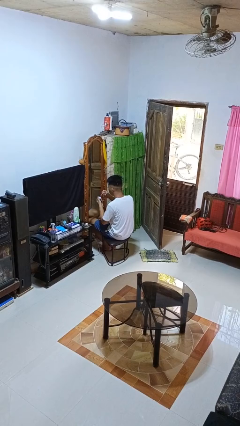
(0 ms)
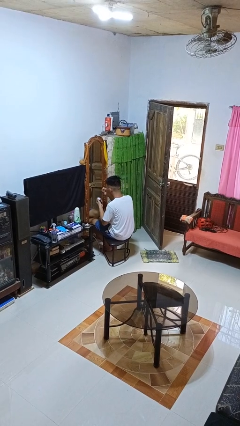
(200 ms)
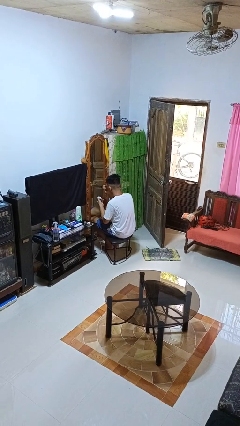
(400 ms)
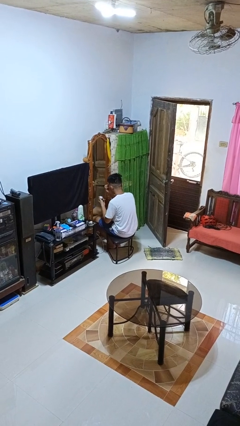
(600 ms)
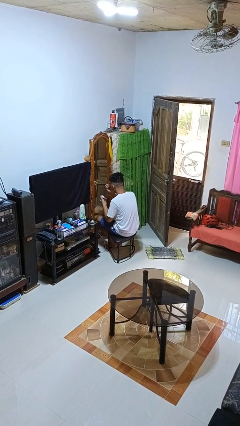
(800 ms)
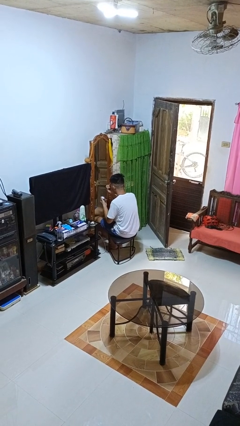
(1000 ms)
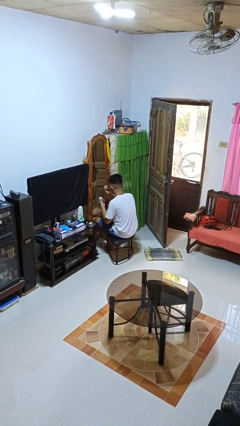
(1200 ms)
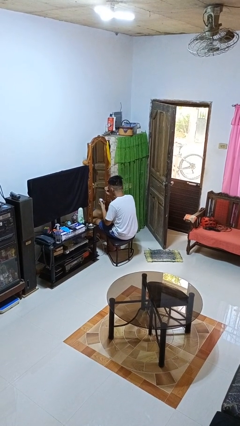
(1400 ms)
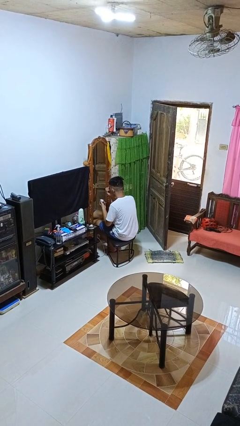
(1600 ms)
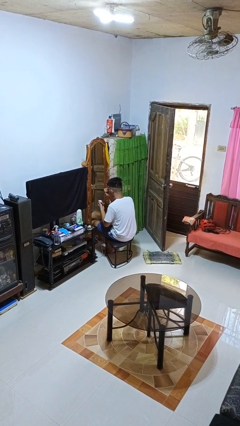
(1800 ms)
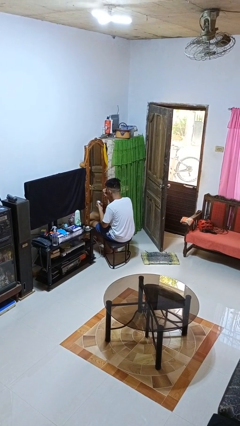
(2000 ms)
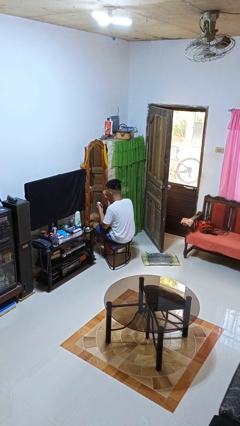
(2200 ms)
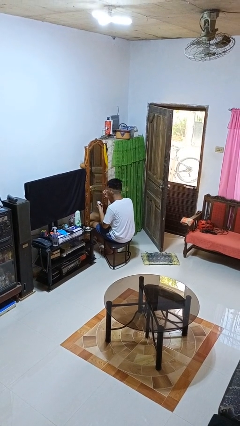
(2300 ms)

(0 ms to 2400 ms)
person applies eye makeup

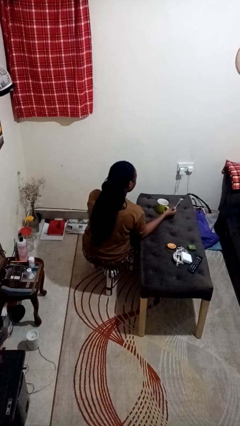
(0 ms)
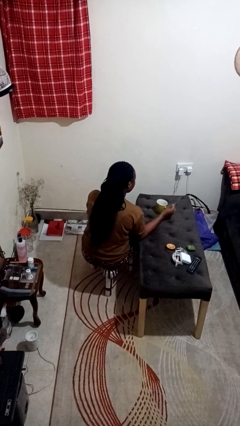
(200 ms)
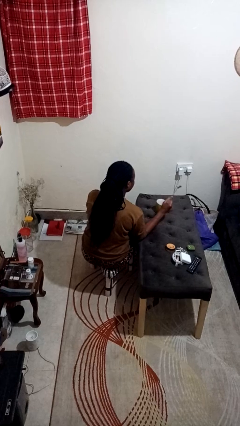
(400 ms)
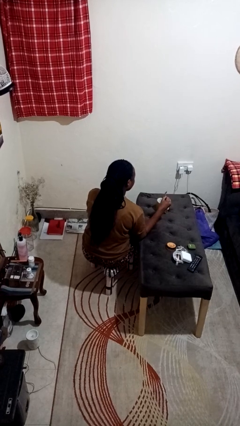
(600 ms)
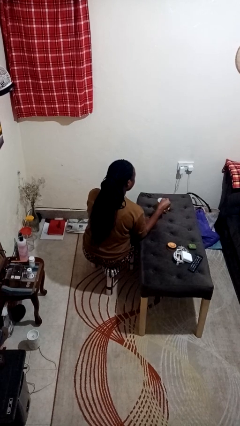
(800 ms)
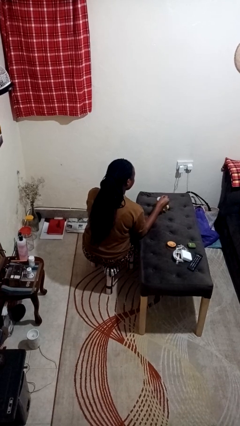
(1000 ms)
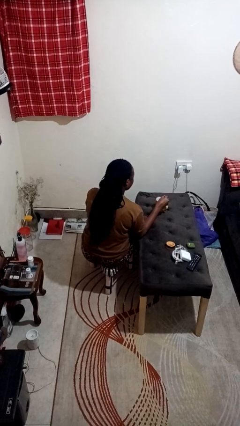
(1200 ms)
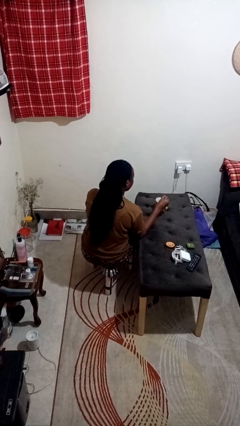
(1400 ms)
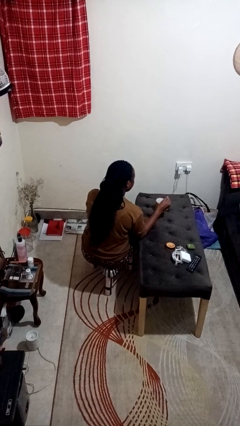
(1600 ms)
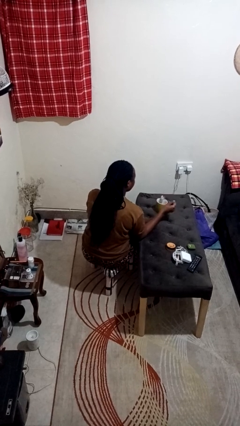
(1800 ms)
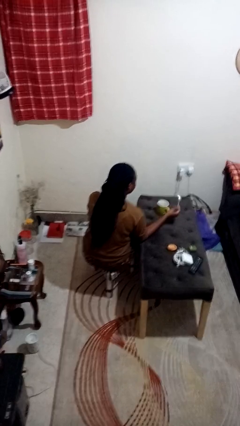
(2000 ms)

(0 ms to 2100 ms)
person stirs mug

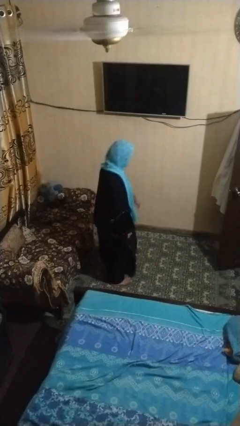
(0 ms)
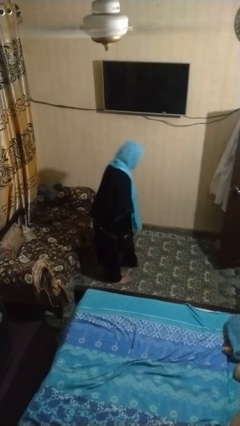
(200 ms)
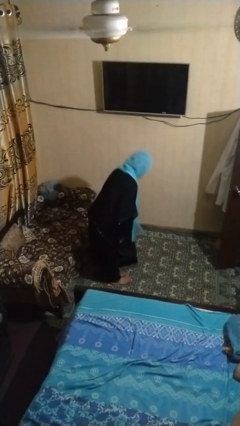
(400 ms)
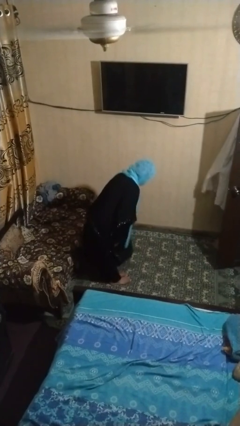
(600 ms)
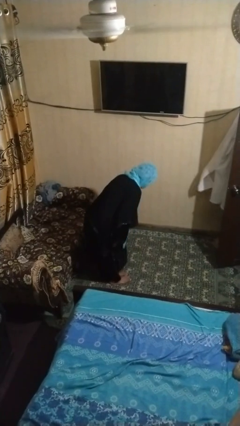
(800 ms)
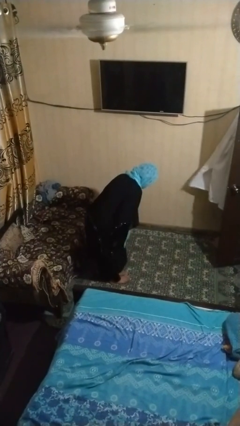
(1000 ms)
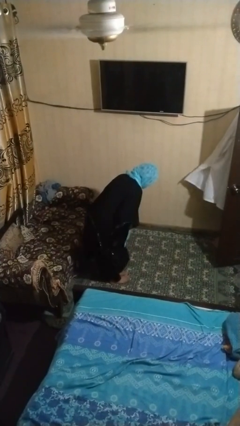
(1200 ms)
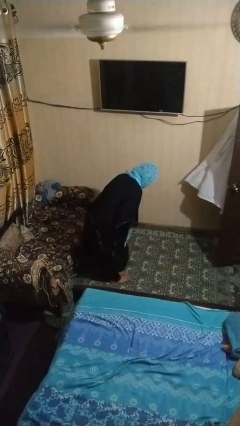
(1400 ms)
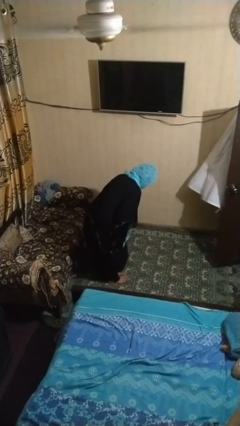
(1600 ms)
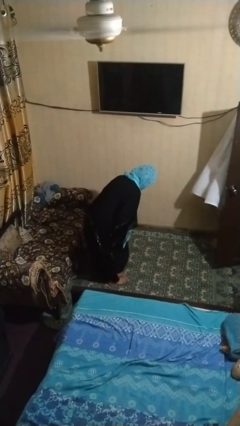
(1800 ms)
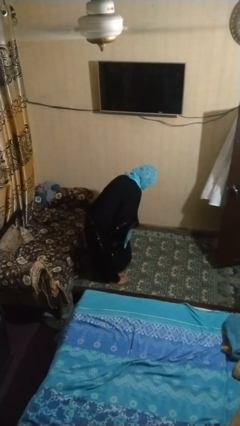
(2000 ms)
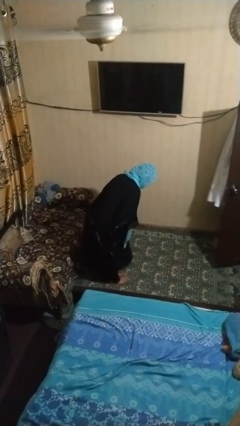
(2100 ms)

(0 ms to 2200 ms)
person bows

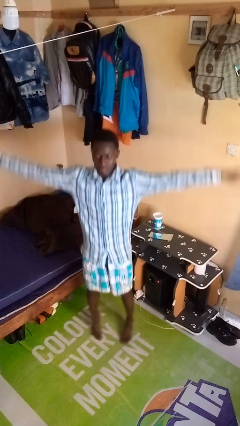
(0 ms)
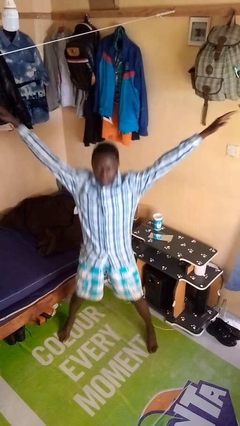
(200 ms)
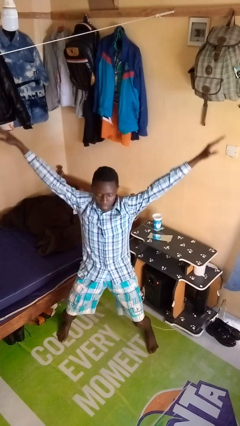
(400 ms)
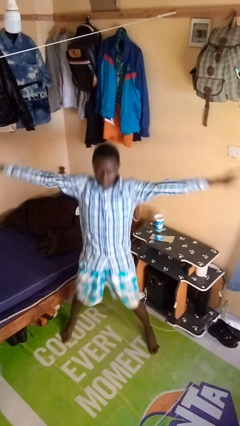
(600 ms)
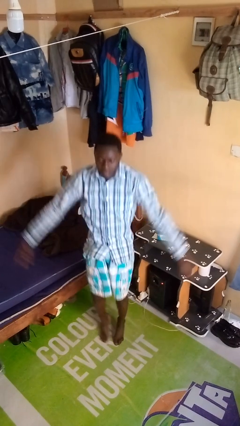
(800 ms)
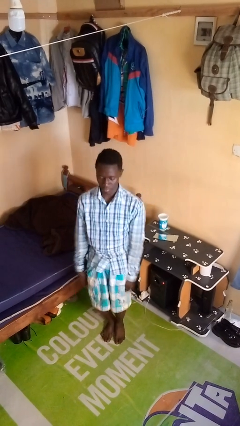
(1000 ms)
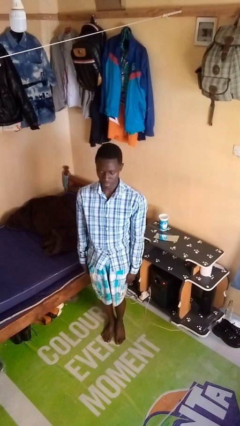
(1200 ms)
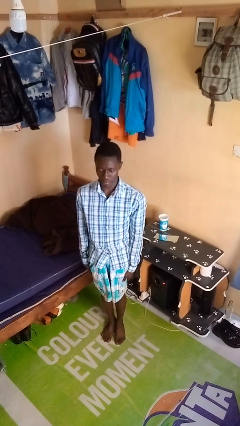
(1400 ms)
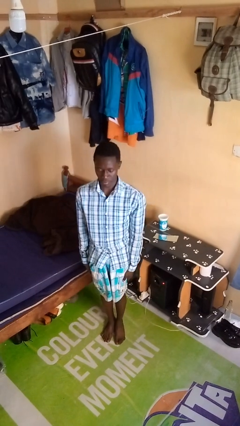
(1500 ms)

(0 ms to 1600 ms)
person exercises with jumping jacks

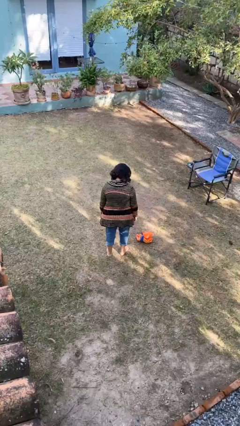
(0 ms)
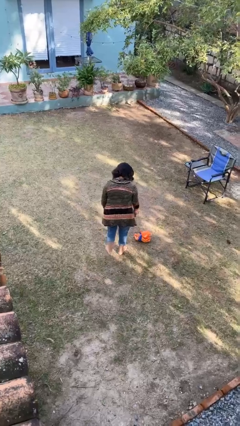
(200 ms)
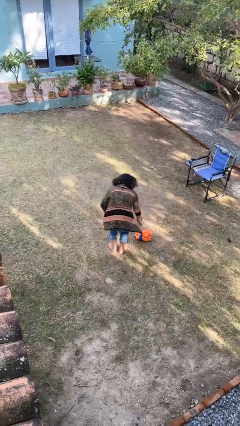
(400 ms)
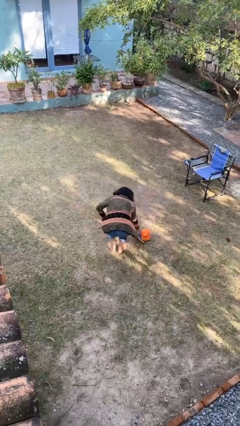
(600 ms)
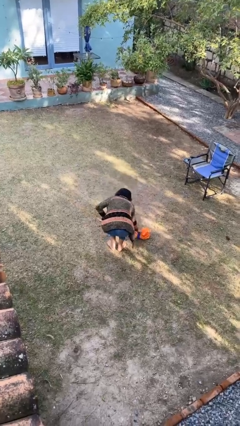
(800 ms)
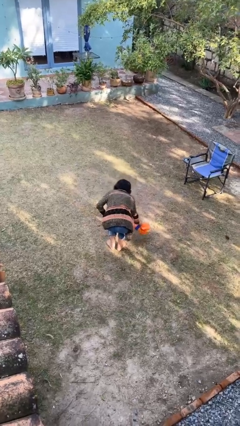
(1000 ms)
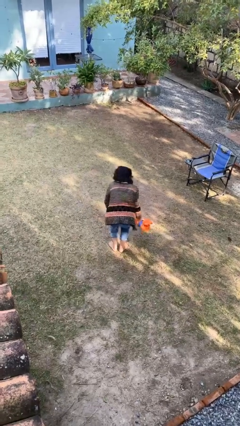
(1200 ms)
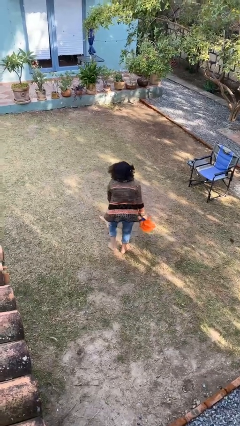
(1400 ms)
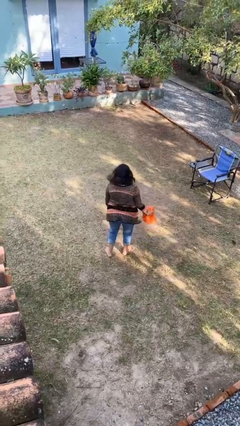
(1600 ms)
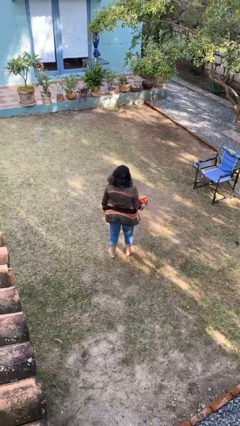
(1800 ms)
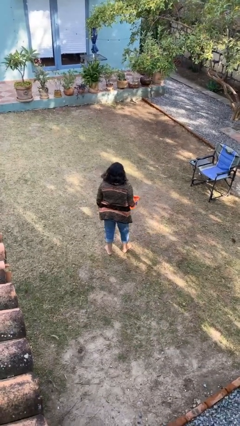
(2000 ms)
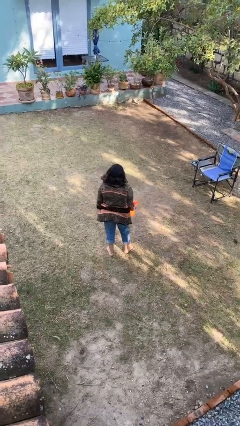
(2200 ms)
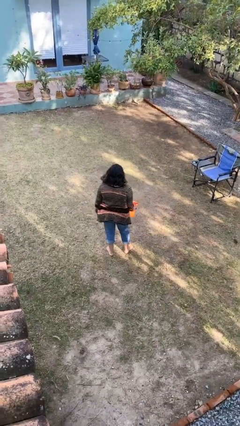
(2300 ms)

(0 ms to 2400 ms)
person picks up object from floor

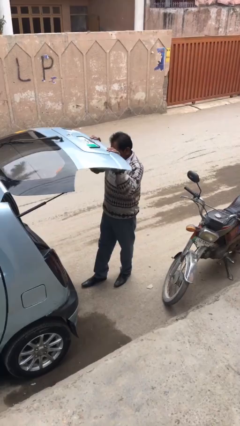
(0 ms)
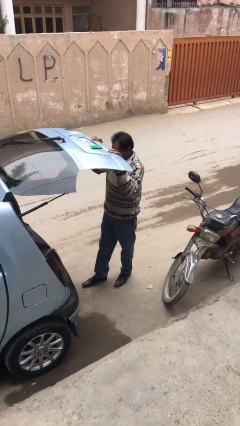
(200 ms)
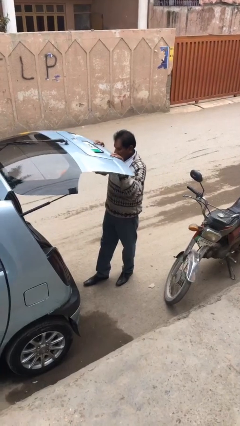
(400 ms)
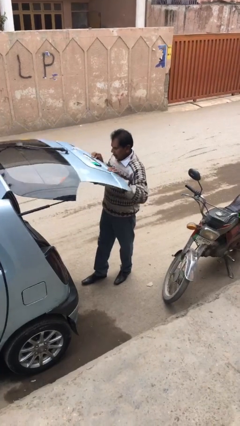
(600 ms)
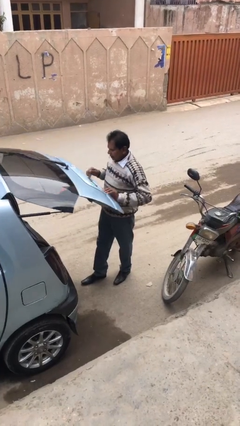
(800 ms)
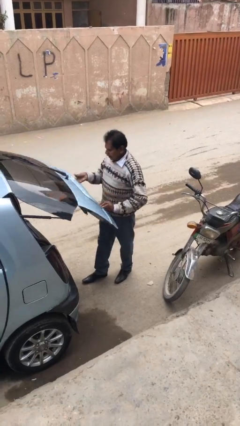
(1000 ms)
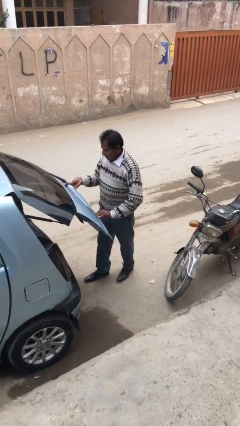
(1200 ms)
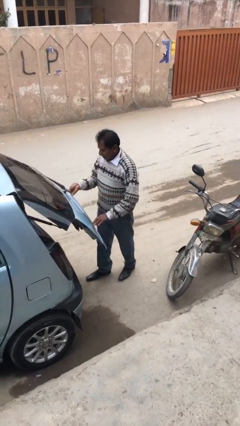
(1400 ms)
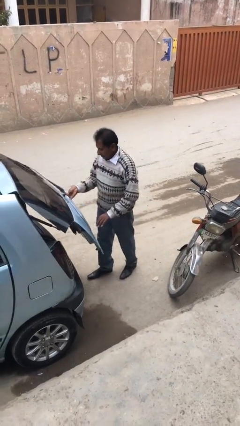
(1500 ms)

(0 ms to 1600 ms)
person closes car trunk

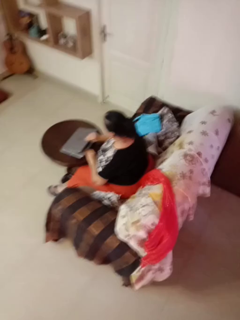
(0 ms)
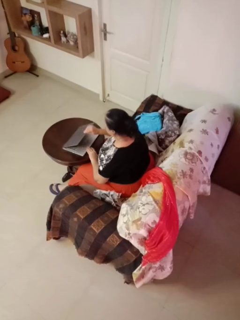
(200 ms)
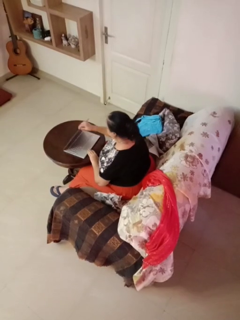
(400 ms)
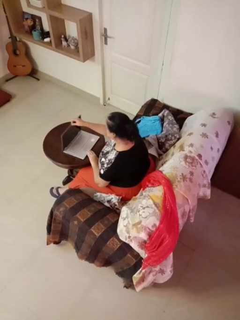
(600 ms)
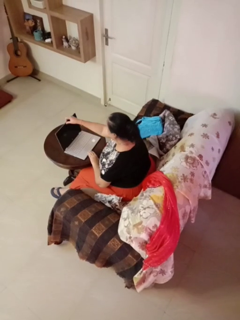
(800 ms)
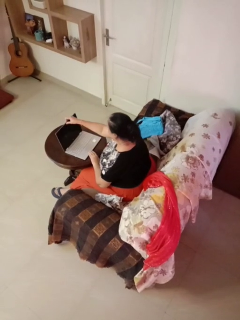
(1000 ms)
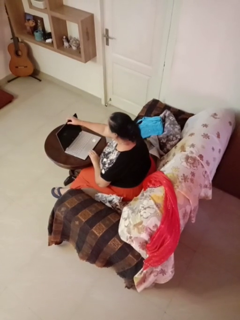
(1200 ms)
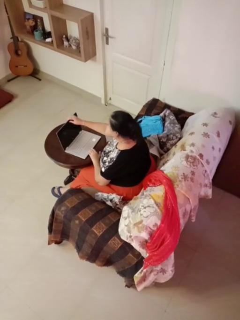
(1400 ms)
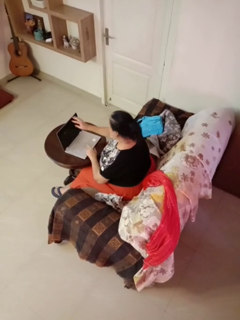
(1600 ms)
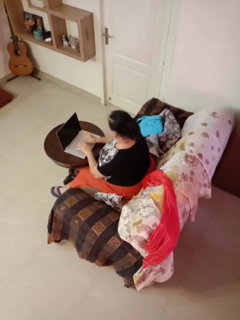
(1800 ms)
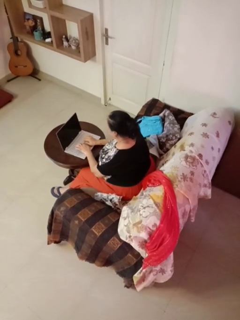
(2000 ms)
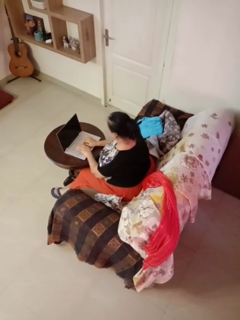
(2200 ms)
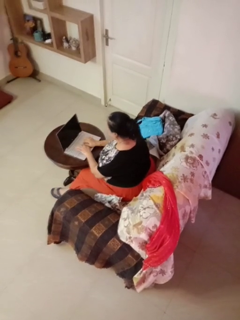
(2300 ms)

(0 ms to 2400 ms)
person opens laptop

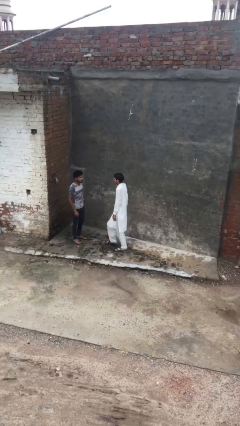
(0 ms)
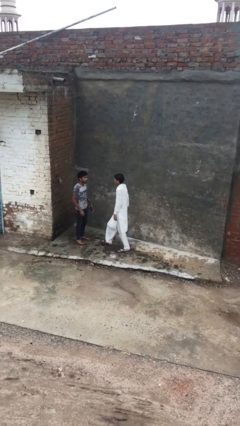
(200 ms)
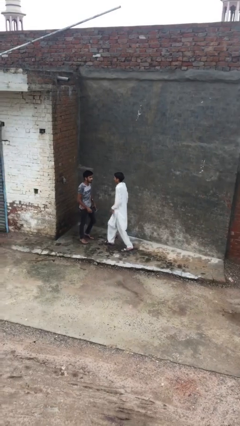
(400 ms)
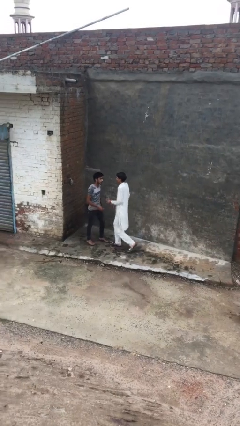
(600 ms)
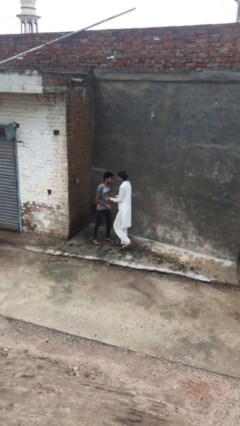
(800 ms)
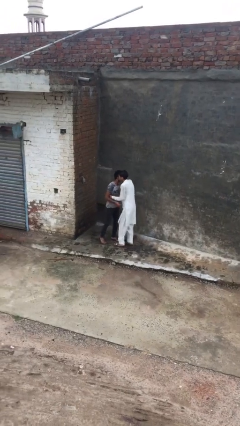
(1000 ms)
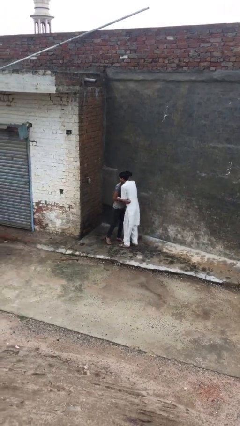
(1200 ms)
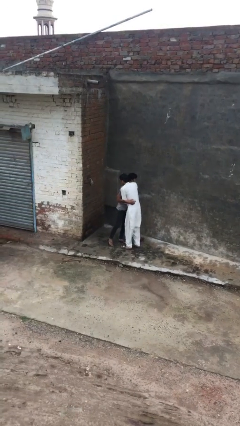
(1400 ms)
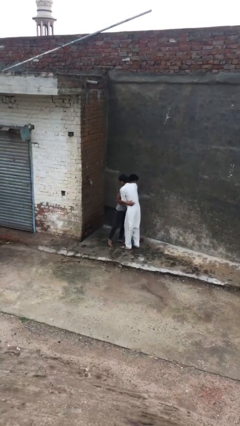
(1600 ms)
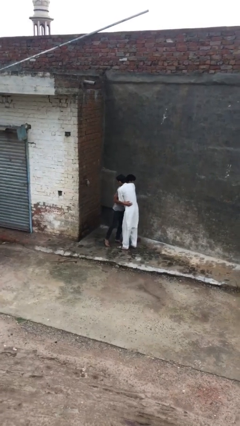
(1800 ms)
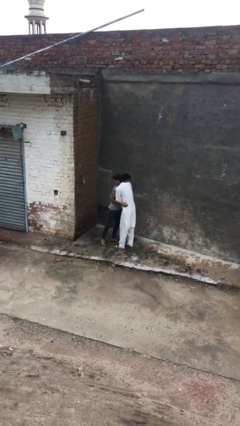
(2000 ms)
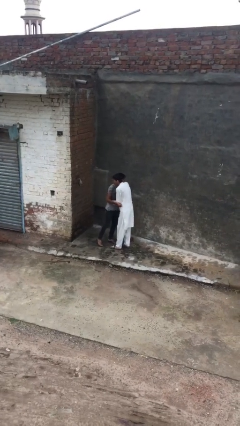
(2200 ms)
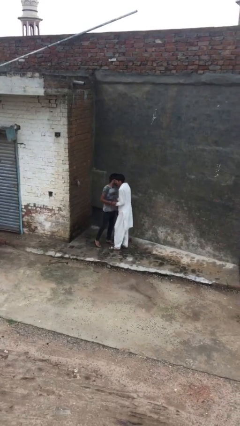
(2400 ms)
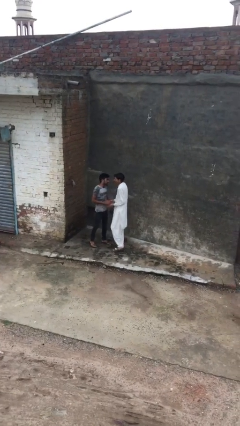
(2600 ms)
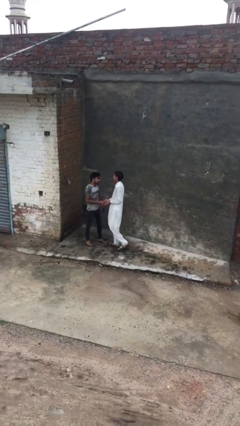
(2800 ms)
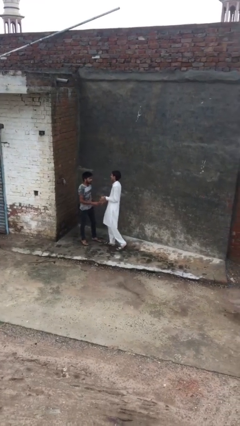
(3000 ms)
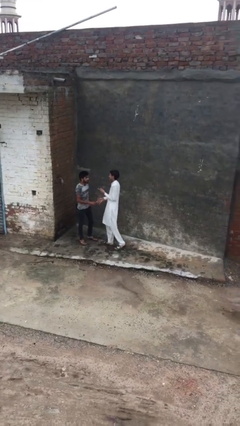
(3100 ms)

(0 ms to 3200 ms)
person embraces person
